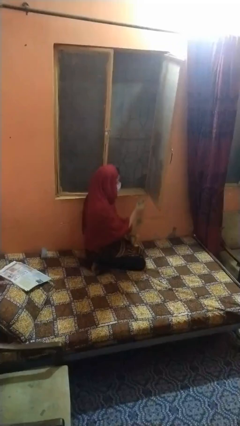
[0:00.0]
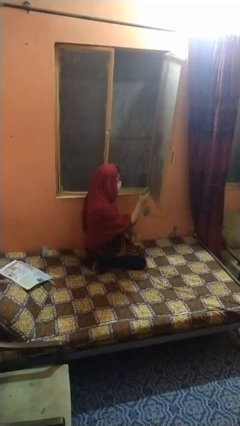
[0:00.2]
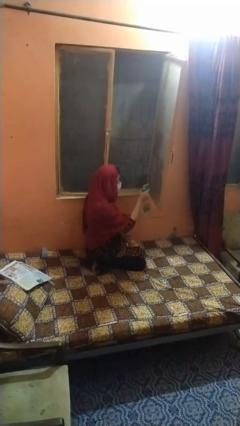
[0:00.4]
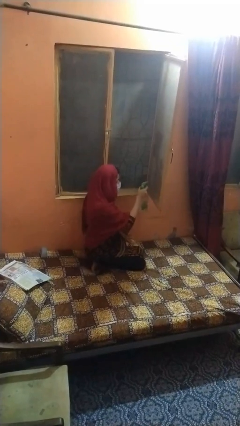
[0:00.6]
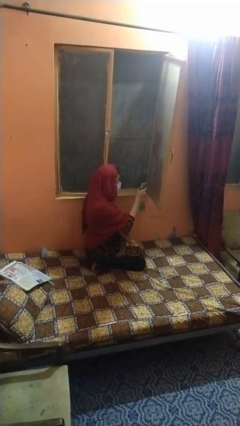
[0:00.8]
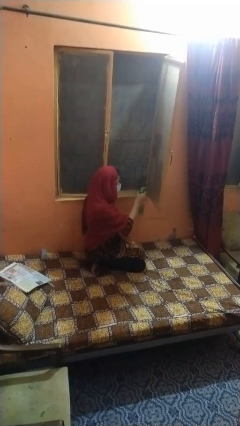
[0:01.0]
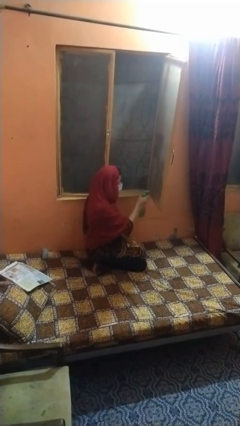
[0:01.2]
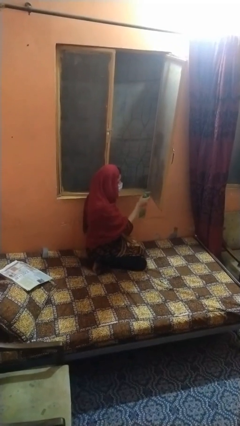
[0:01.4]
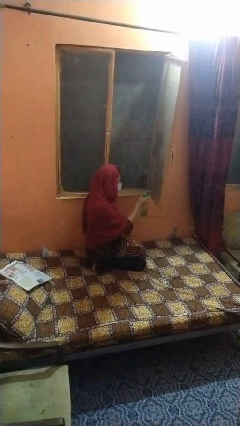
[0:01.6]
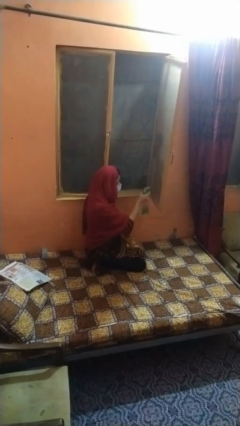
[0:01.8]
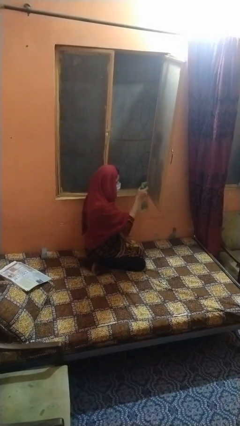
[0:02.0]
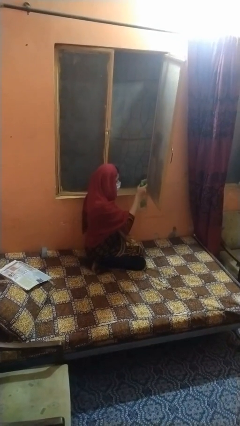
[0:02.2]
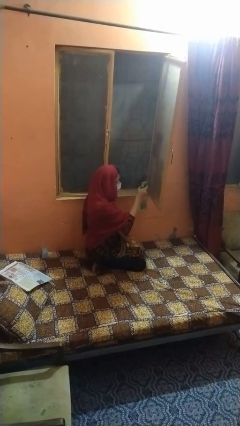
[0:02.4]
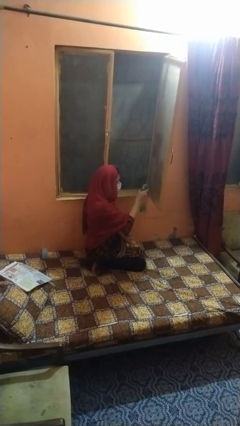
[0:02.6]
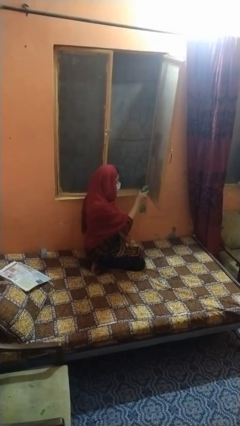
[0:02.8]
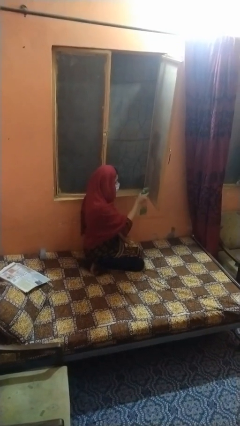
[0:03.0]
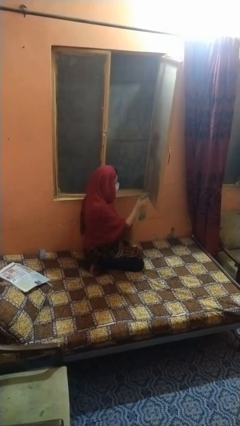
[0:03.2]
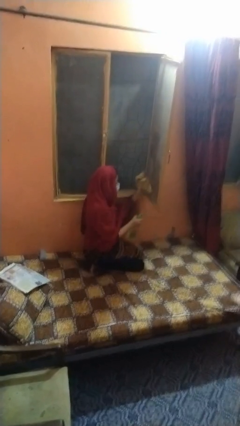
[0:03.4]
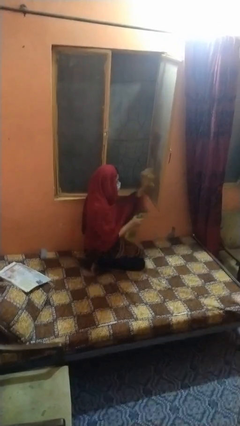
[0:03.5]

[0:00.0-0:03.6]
person sprays from bottle

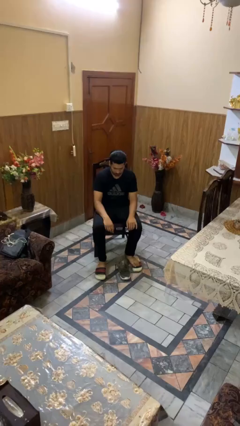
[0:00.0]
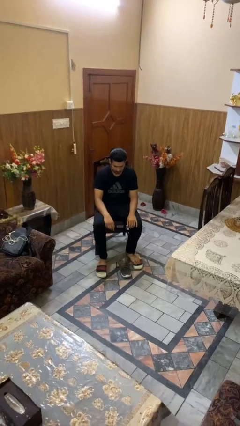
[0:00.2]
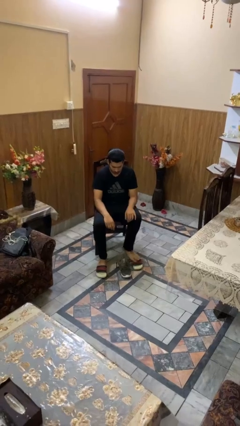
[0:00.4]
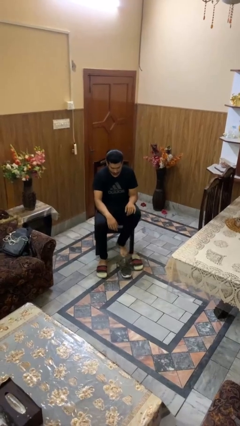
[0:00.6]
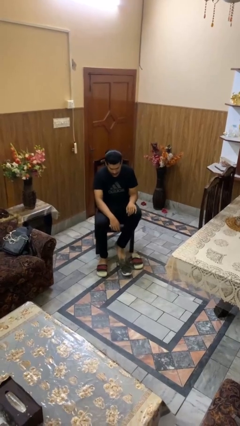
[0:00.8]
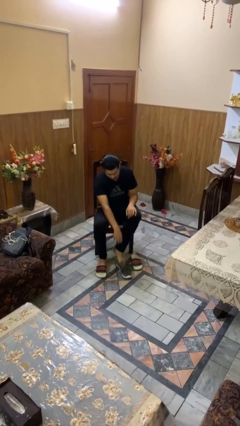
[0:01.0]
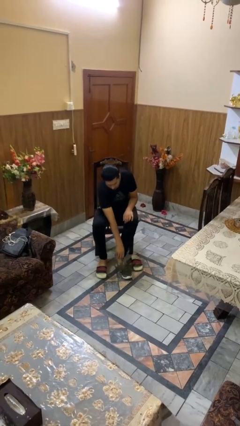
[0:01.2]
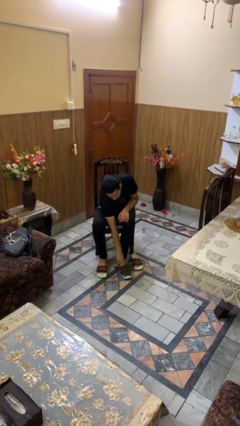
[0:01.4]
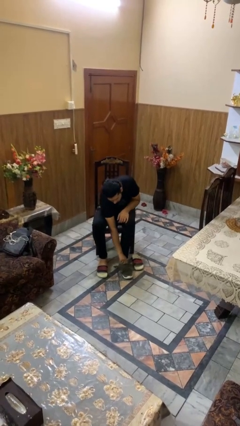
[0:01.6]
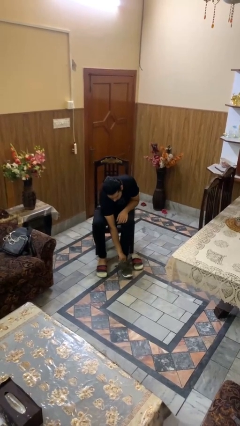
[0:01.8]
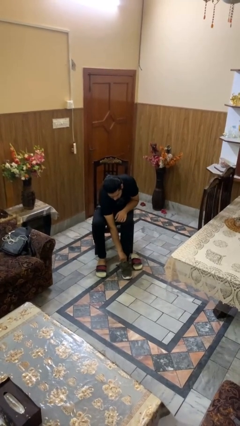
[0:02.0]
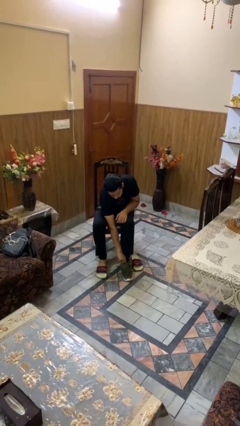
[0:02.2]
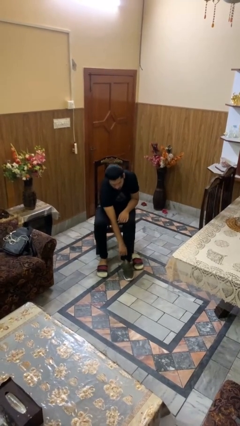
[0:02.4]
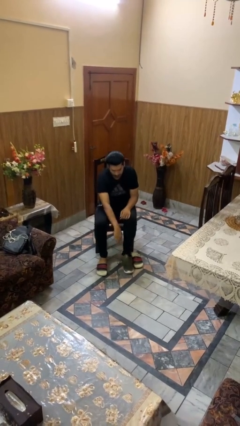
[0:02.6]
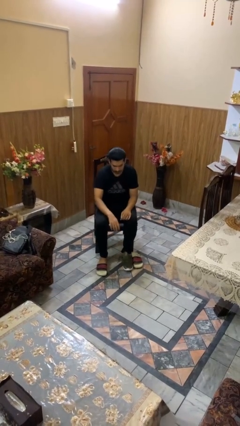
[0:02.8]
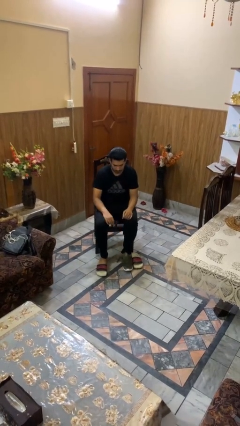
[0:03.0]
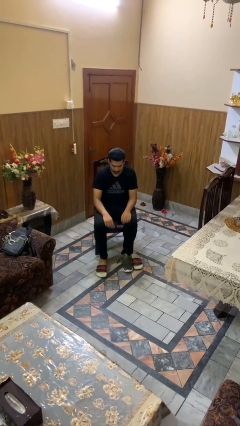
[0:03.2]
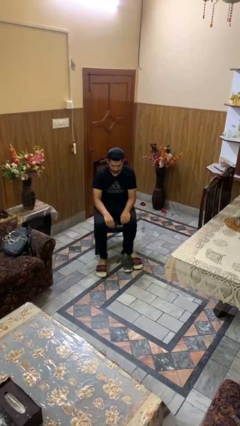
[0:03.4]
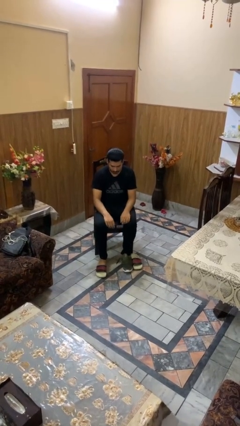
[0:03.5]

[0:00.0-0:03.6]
person puts on shoes

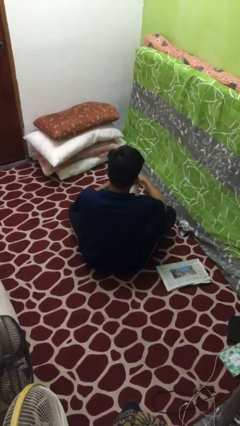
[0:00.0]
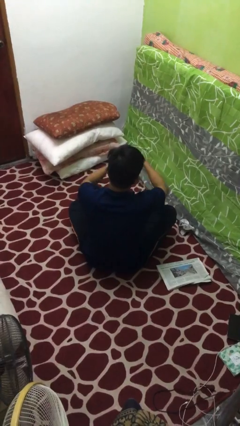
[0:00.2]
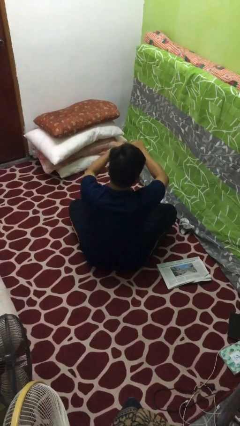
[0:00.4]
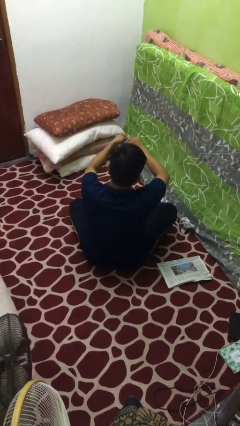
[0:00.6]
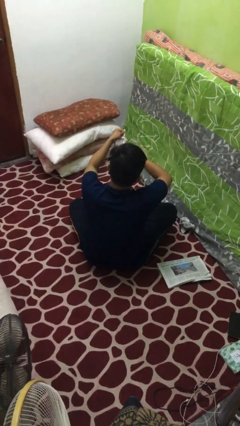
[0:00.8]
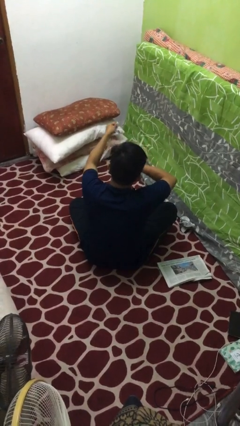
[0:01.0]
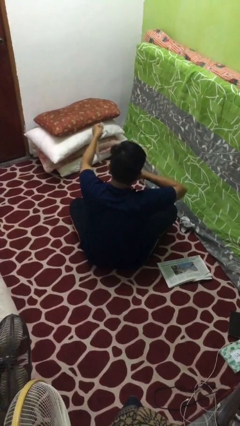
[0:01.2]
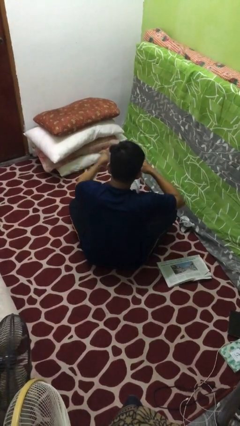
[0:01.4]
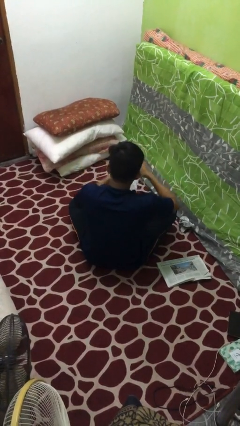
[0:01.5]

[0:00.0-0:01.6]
person tears paper

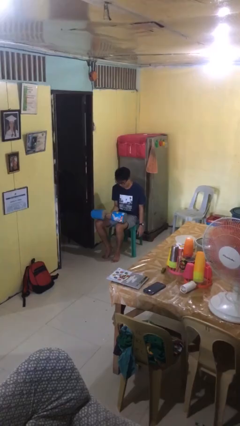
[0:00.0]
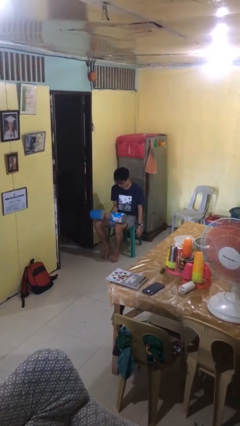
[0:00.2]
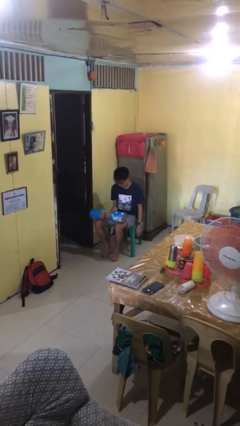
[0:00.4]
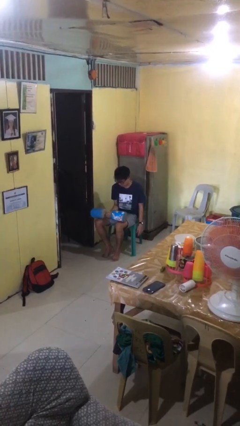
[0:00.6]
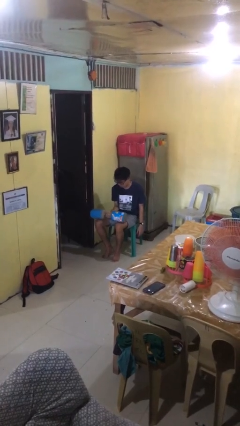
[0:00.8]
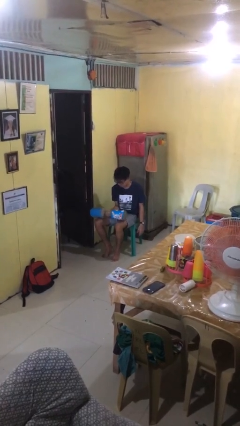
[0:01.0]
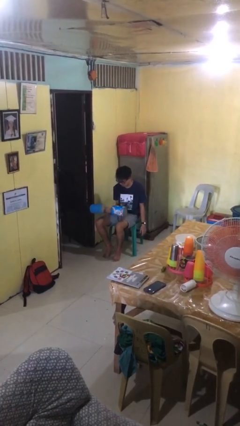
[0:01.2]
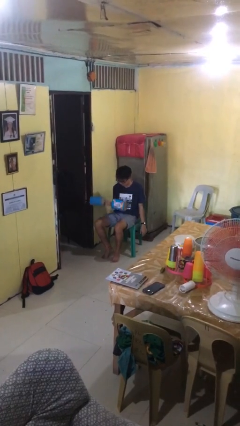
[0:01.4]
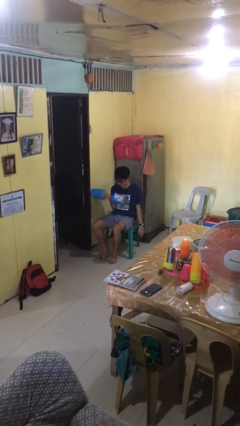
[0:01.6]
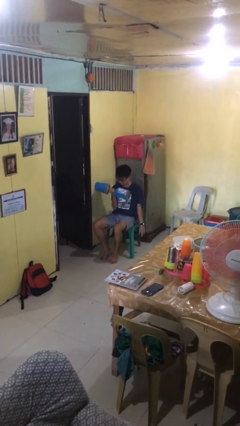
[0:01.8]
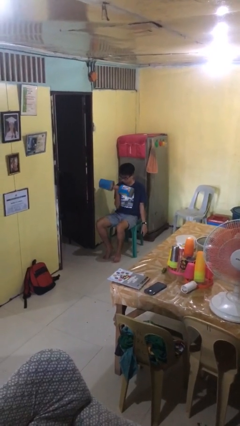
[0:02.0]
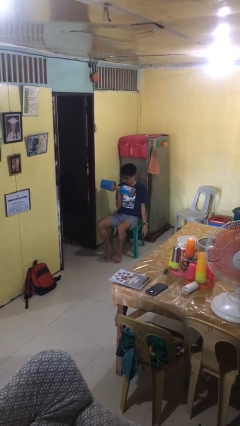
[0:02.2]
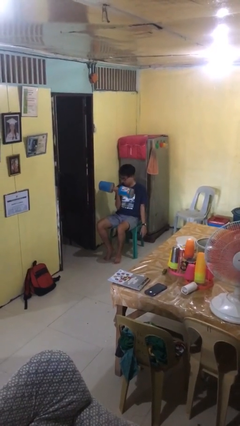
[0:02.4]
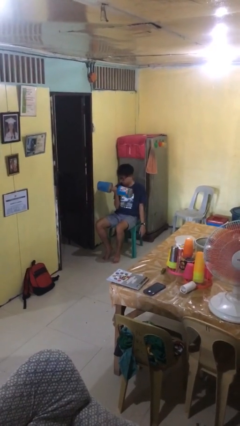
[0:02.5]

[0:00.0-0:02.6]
person lifts dumbbells

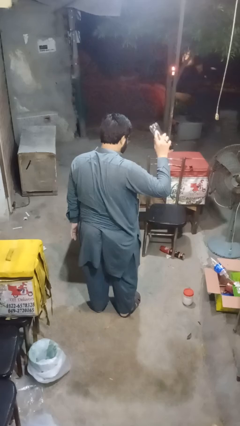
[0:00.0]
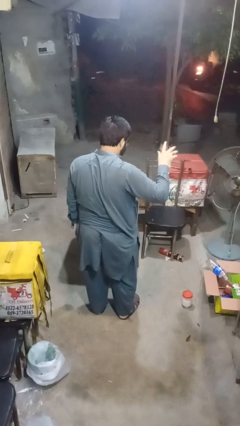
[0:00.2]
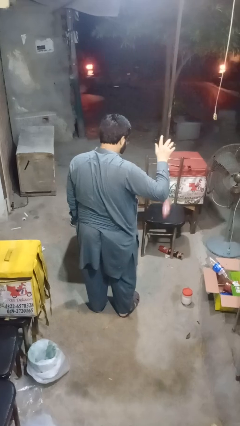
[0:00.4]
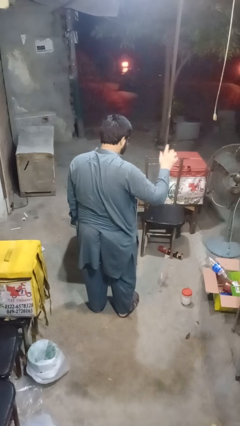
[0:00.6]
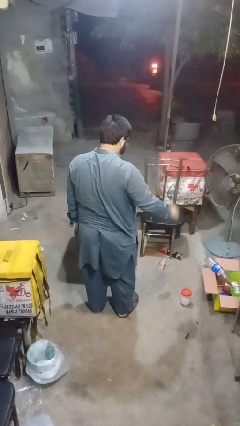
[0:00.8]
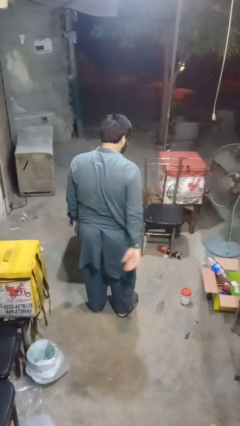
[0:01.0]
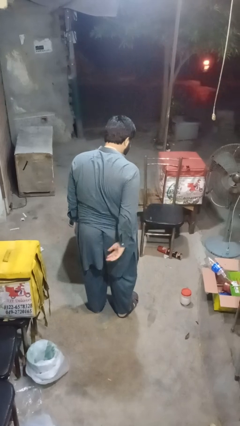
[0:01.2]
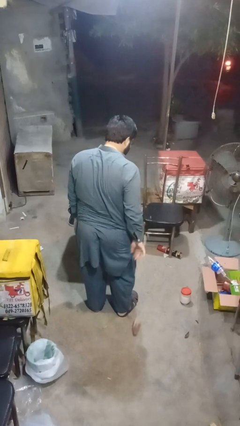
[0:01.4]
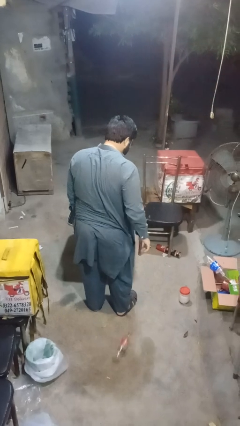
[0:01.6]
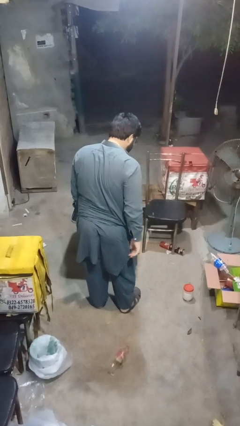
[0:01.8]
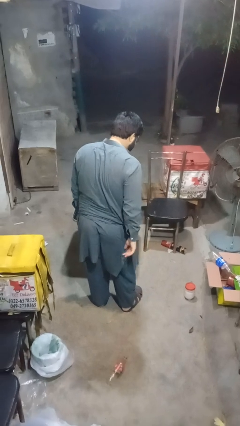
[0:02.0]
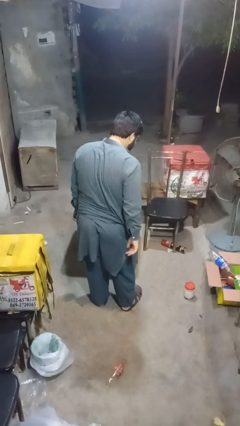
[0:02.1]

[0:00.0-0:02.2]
person throws object to ground

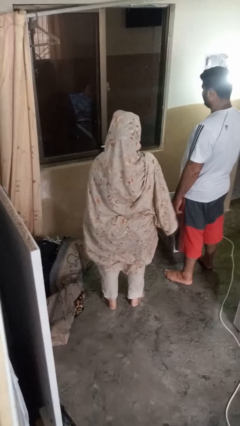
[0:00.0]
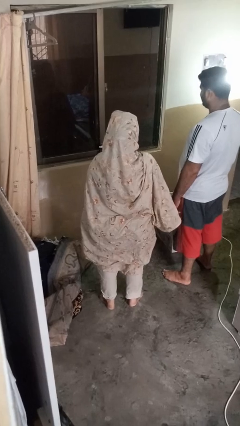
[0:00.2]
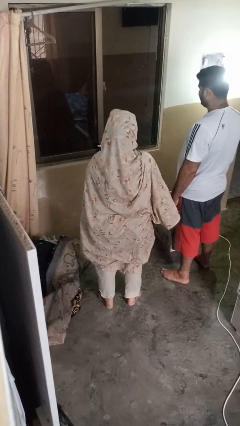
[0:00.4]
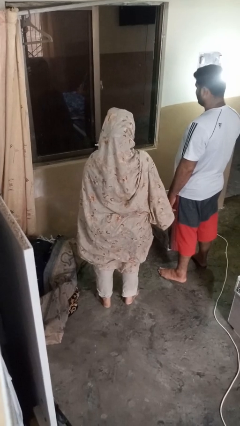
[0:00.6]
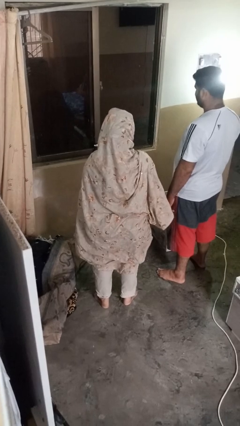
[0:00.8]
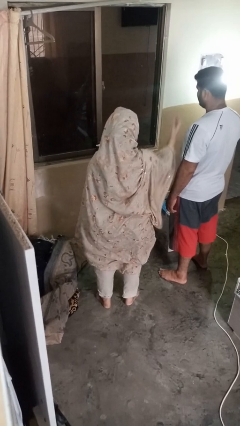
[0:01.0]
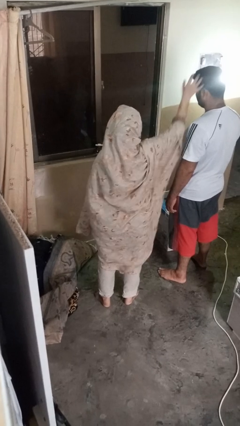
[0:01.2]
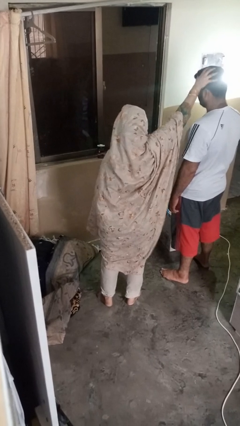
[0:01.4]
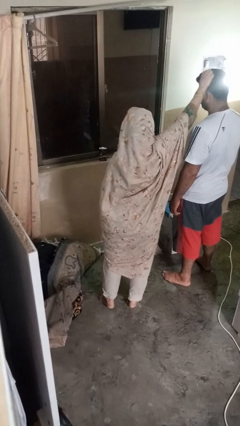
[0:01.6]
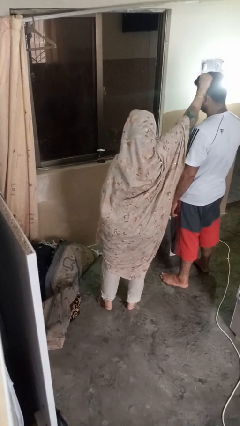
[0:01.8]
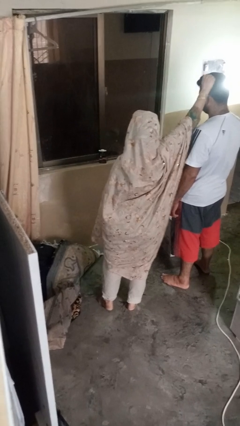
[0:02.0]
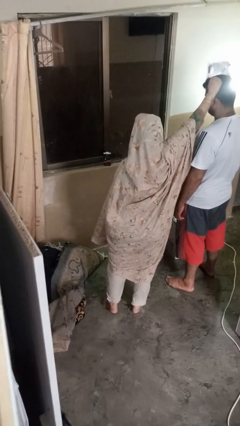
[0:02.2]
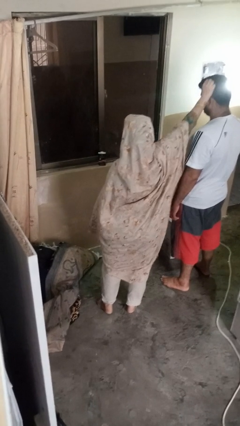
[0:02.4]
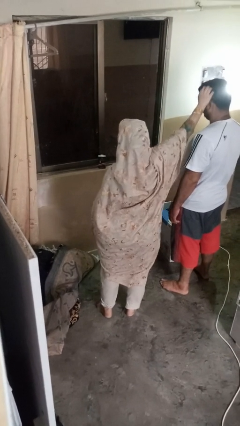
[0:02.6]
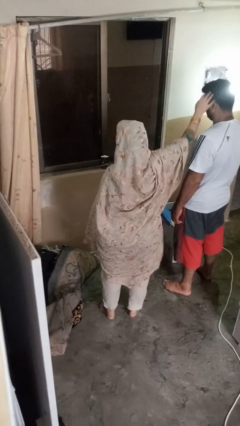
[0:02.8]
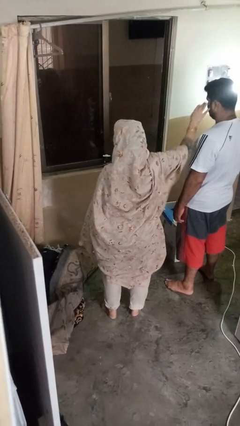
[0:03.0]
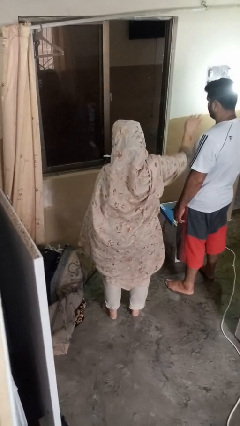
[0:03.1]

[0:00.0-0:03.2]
person grabs person by hair

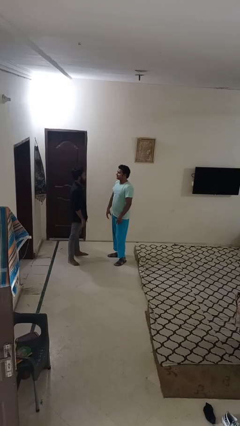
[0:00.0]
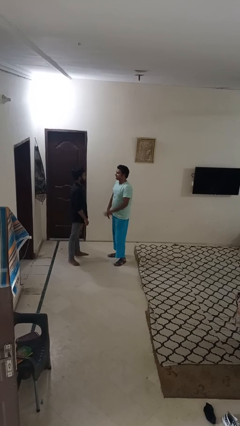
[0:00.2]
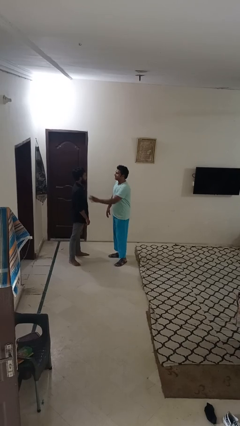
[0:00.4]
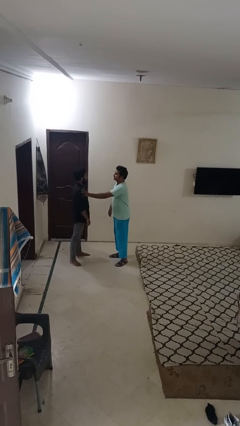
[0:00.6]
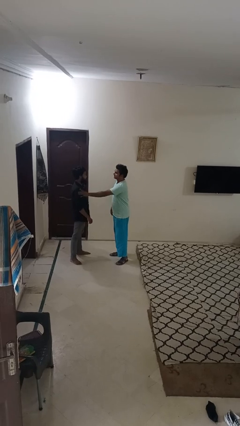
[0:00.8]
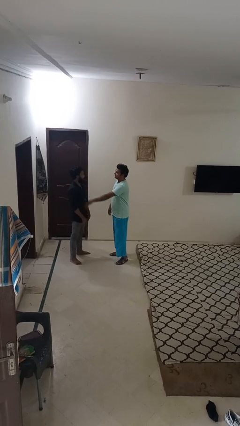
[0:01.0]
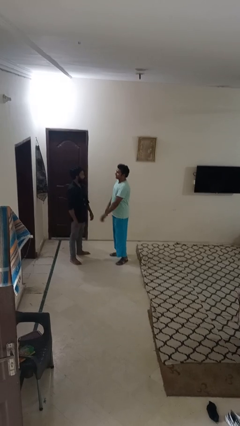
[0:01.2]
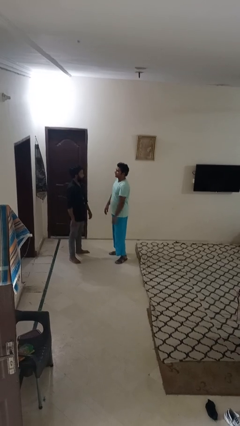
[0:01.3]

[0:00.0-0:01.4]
person shoves person
